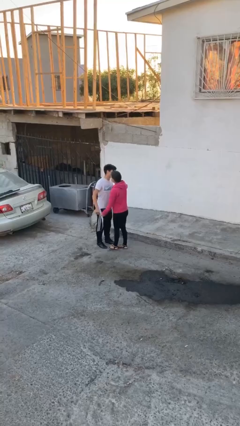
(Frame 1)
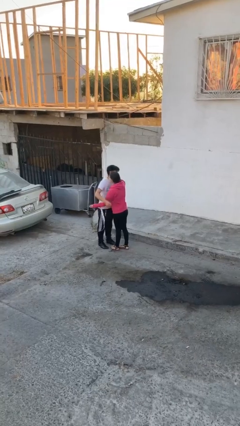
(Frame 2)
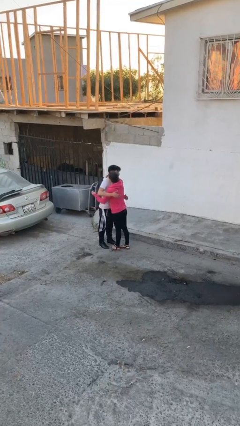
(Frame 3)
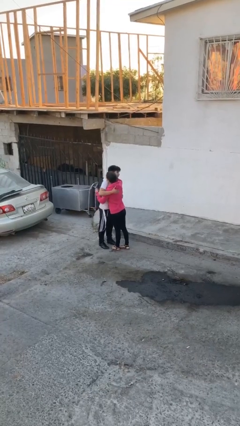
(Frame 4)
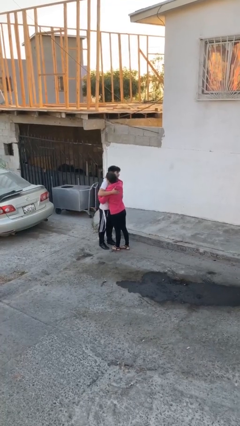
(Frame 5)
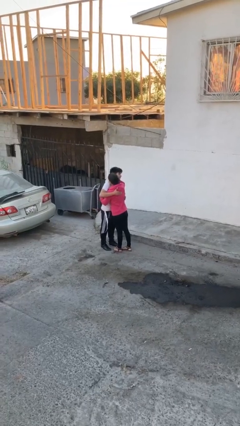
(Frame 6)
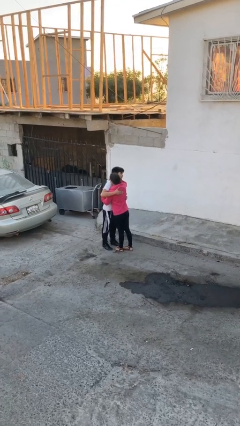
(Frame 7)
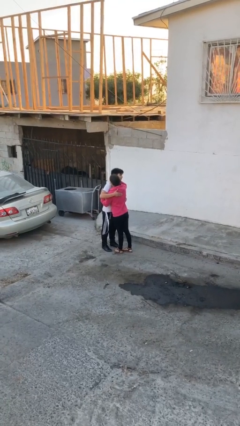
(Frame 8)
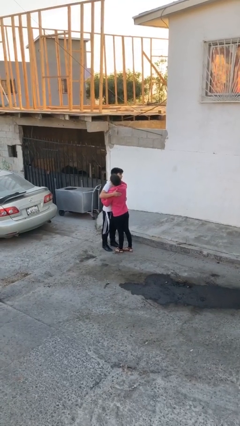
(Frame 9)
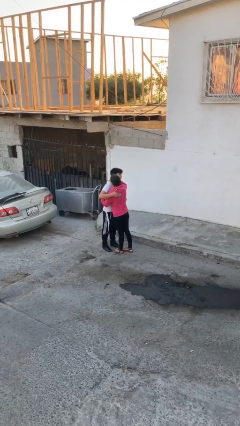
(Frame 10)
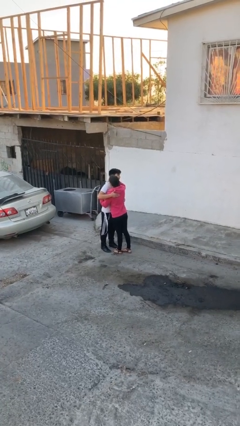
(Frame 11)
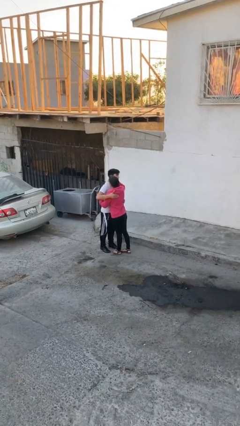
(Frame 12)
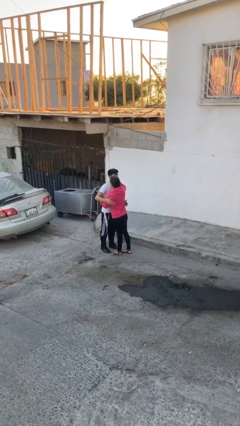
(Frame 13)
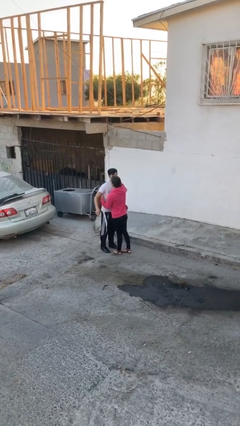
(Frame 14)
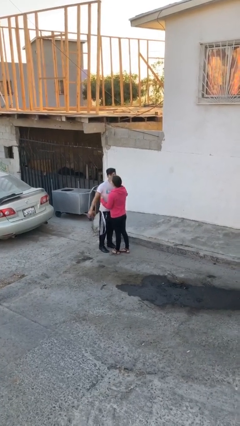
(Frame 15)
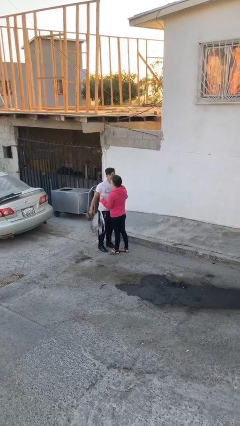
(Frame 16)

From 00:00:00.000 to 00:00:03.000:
person embraces person

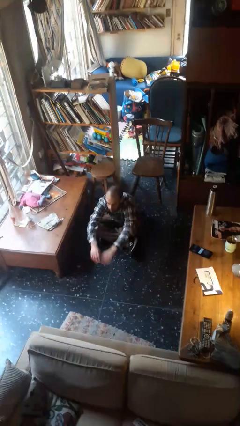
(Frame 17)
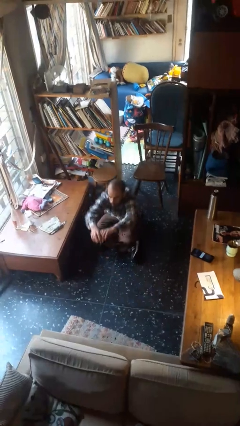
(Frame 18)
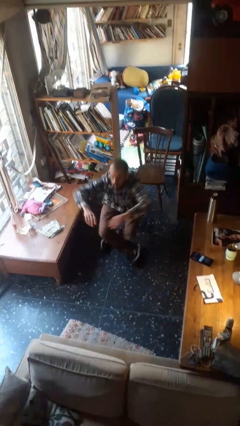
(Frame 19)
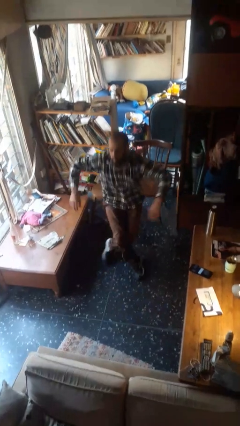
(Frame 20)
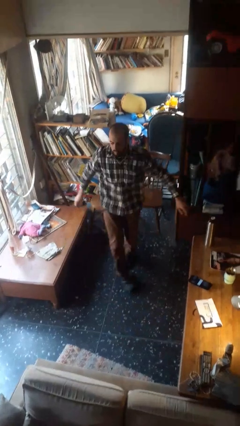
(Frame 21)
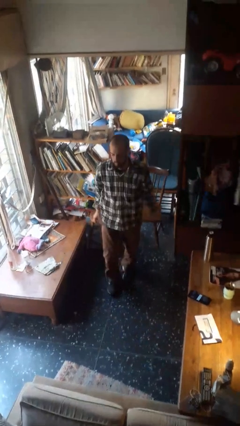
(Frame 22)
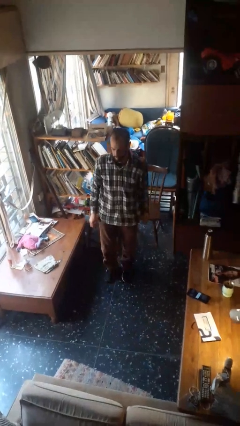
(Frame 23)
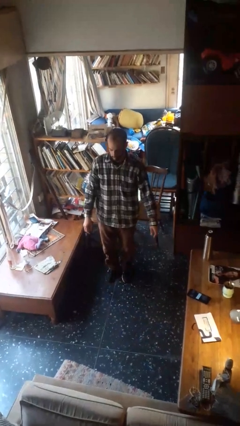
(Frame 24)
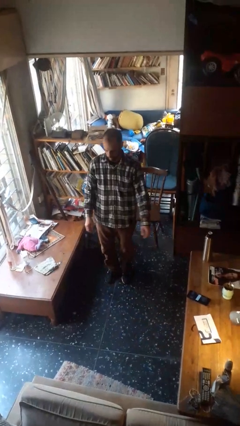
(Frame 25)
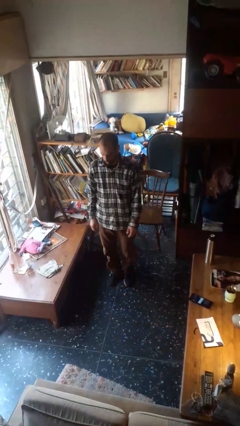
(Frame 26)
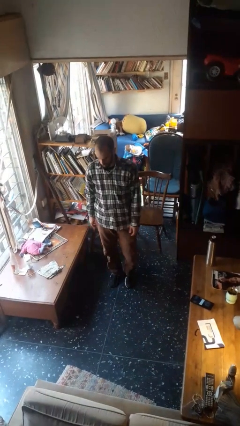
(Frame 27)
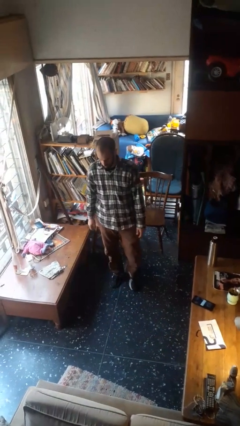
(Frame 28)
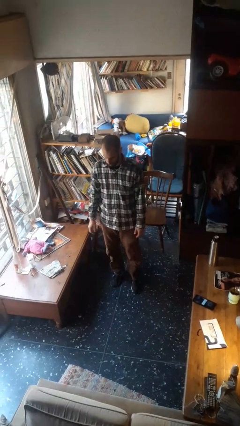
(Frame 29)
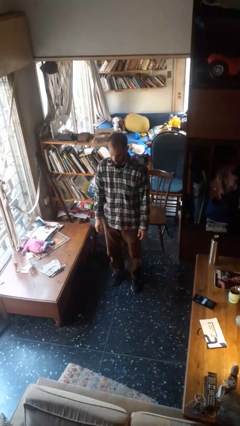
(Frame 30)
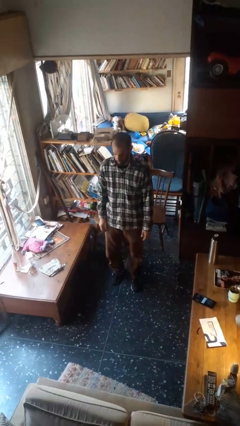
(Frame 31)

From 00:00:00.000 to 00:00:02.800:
person stands up from floor

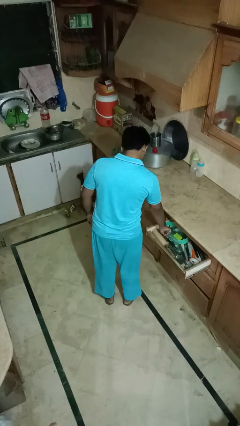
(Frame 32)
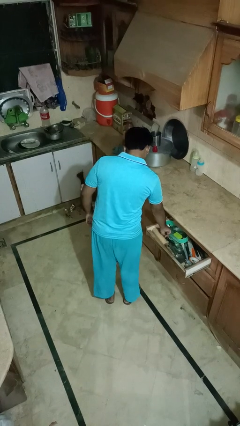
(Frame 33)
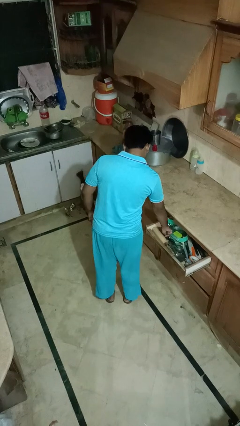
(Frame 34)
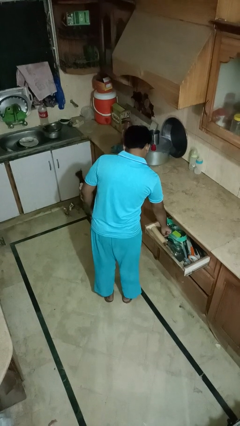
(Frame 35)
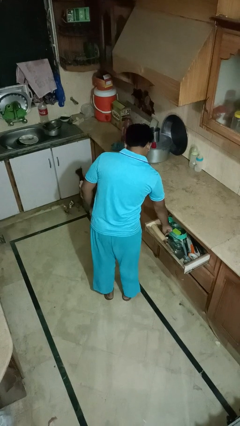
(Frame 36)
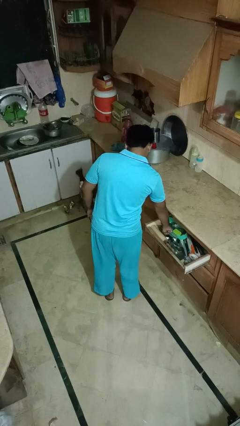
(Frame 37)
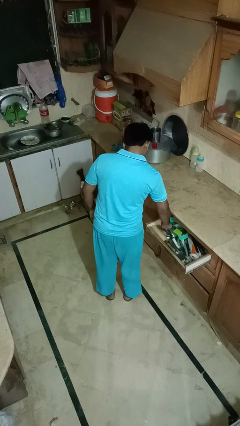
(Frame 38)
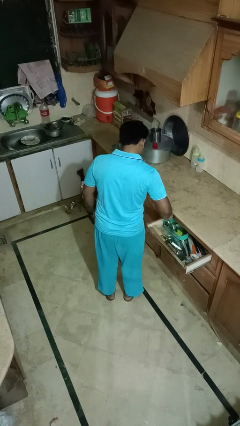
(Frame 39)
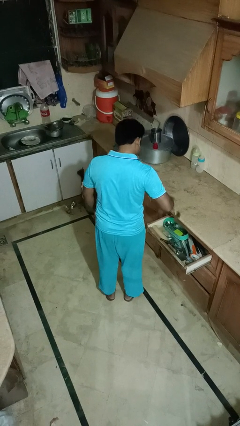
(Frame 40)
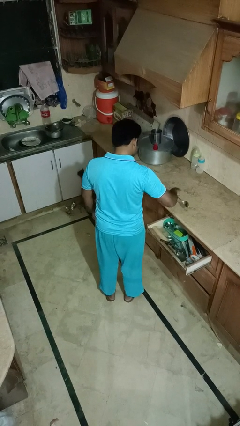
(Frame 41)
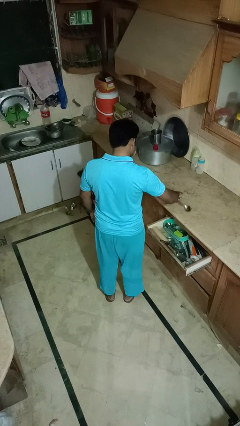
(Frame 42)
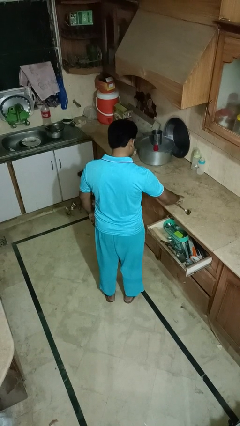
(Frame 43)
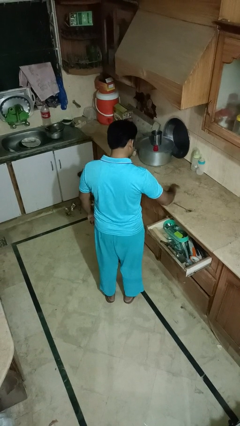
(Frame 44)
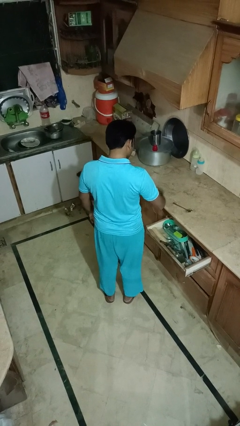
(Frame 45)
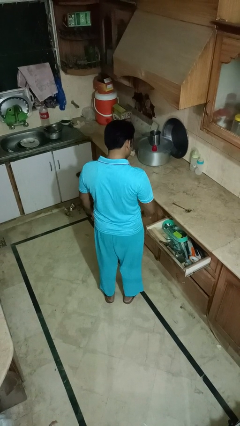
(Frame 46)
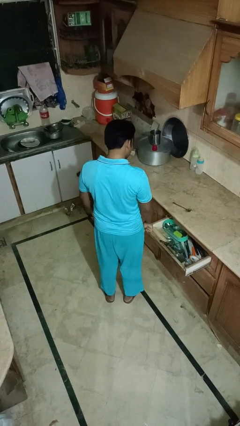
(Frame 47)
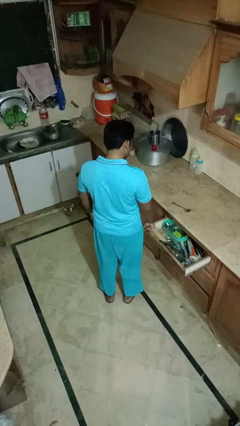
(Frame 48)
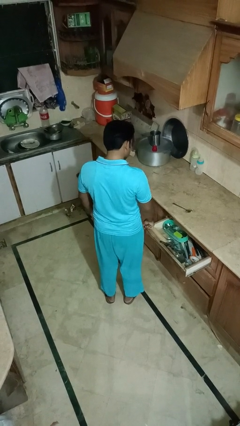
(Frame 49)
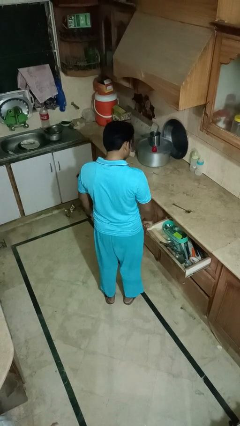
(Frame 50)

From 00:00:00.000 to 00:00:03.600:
person takes object from kitchen drawer

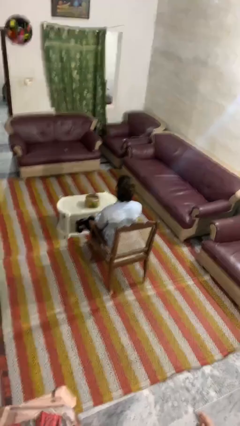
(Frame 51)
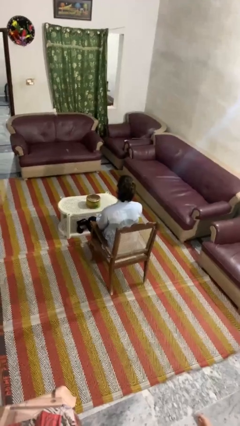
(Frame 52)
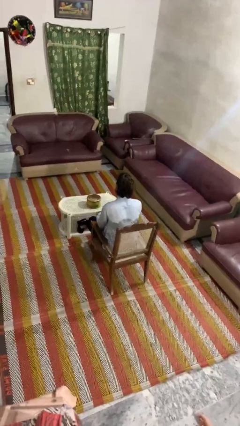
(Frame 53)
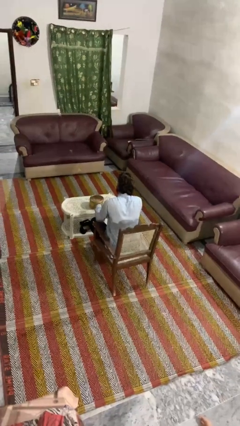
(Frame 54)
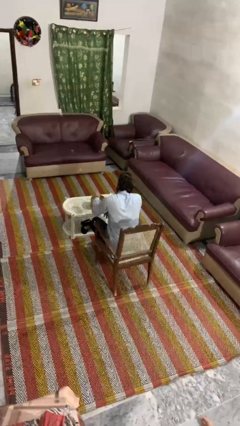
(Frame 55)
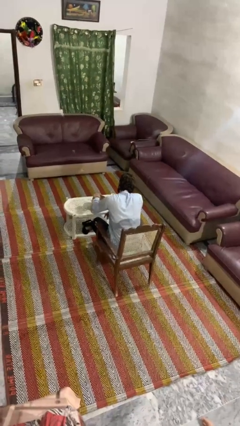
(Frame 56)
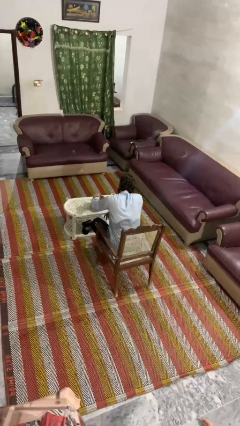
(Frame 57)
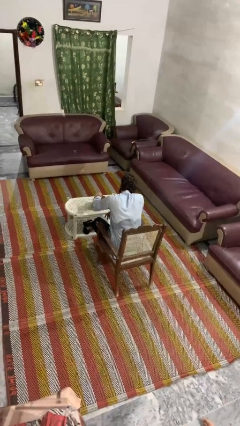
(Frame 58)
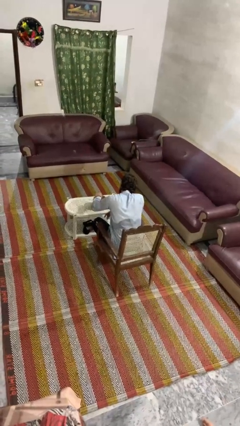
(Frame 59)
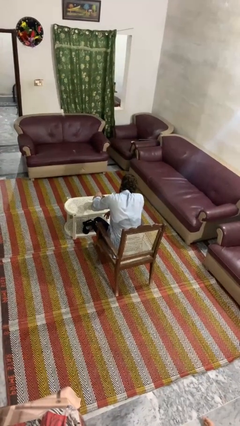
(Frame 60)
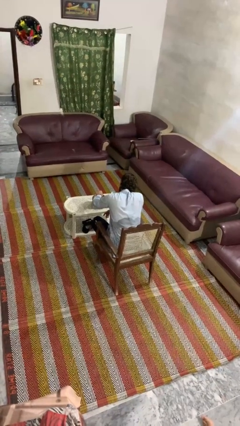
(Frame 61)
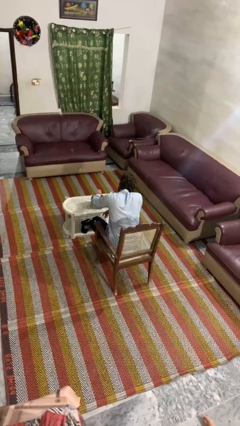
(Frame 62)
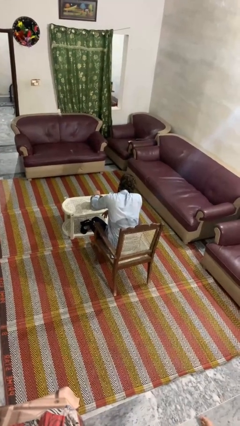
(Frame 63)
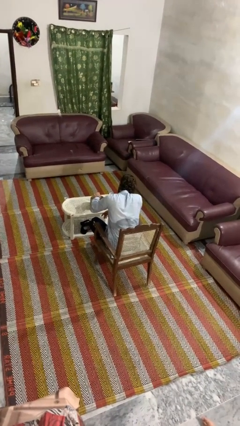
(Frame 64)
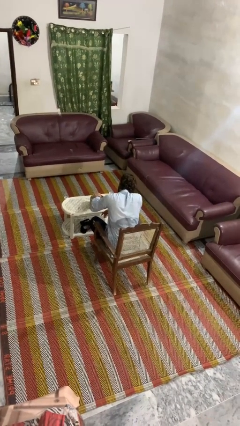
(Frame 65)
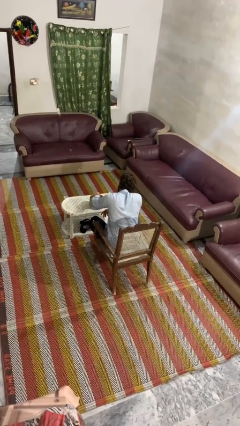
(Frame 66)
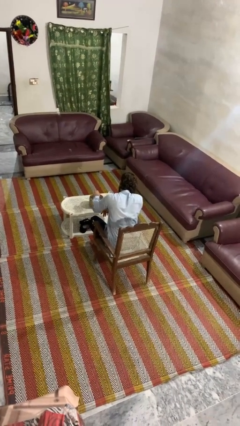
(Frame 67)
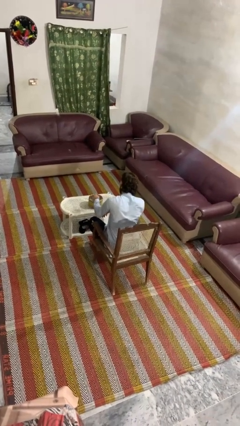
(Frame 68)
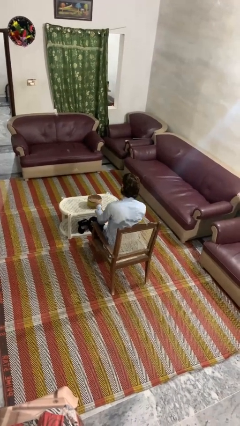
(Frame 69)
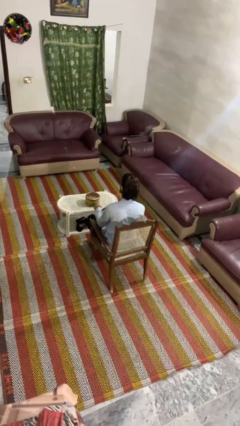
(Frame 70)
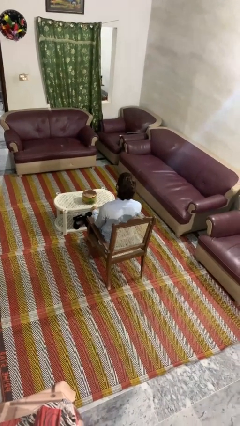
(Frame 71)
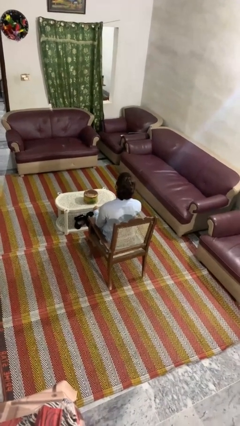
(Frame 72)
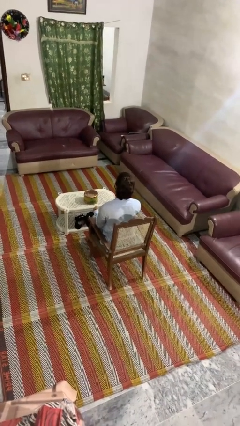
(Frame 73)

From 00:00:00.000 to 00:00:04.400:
person taps object with finger

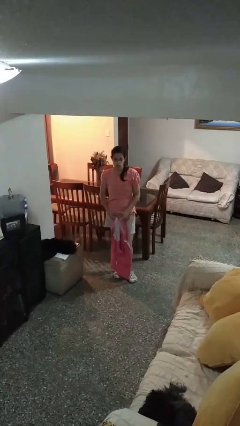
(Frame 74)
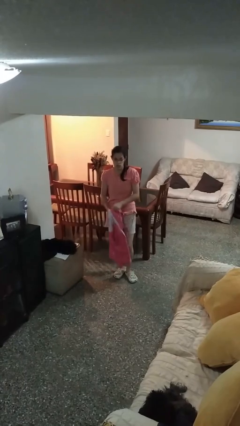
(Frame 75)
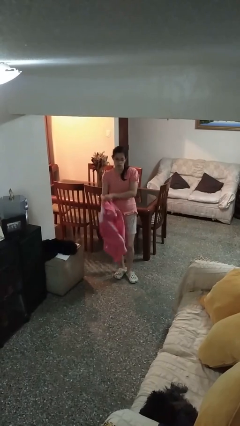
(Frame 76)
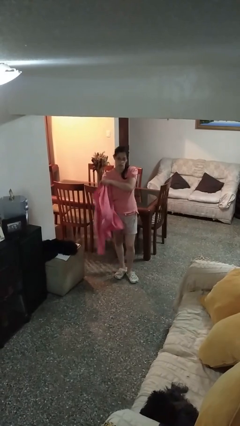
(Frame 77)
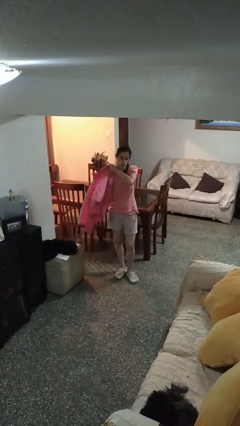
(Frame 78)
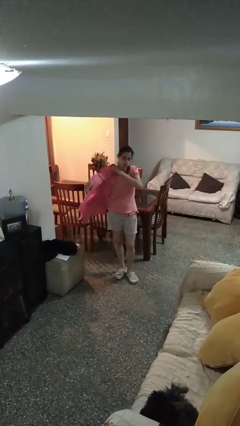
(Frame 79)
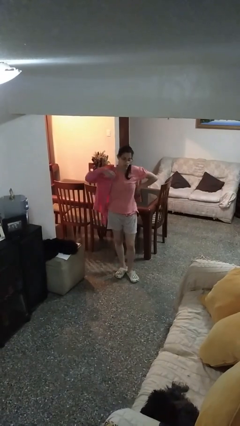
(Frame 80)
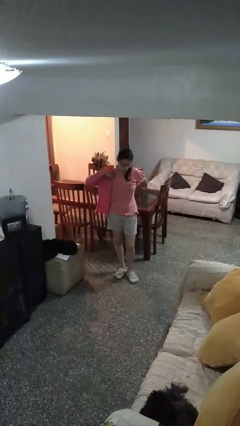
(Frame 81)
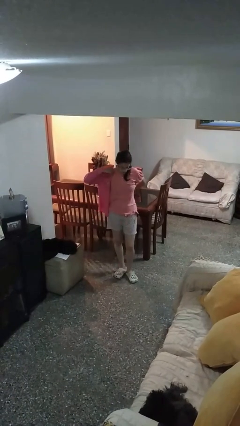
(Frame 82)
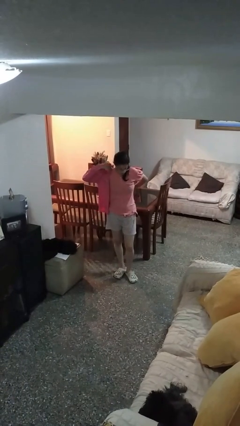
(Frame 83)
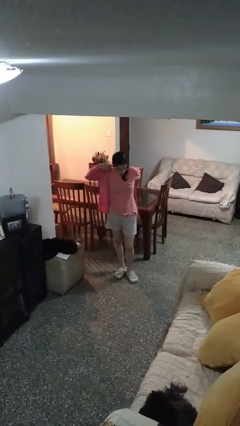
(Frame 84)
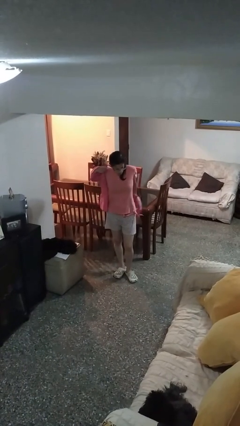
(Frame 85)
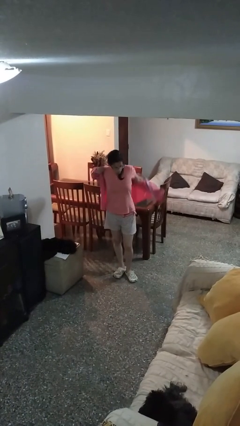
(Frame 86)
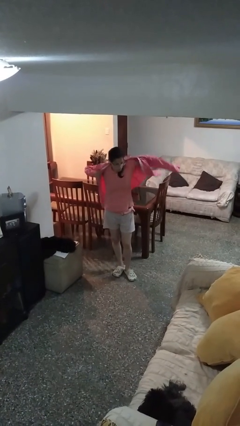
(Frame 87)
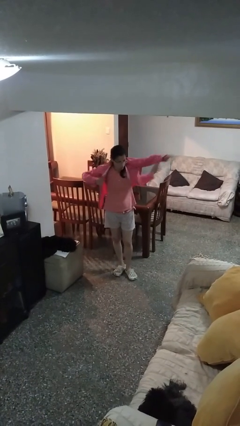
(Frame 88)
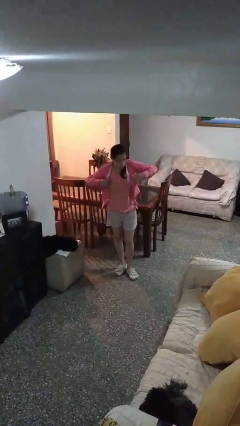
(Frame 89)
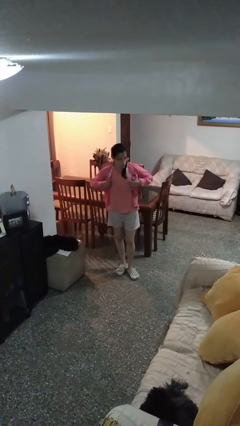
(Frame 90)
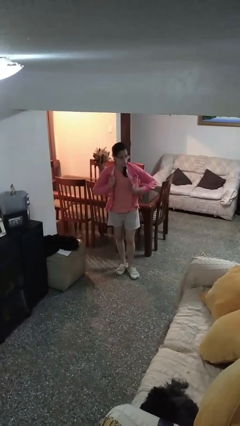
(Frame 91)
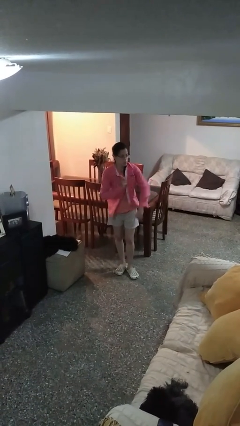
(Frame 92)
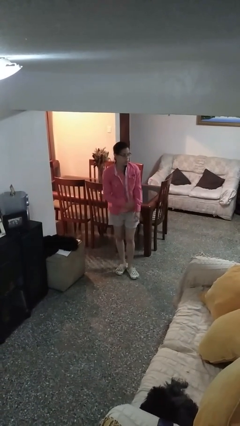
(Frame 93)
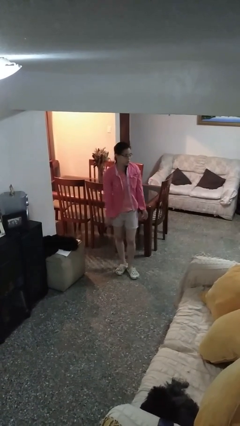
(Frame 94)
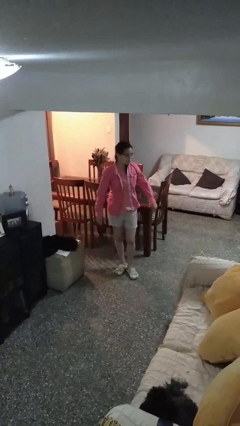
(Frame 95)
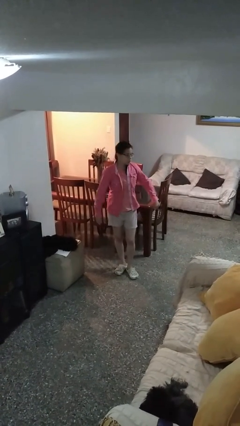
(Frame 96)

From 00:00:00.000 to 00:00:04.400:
person puts on shirt
